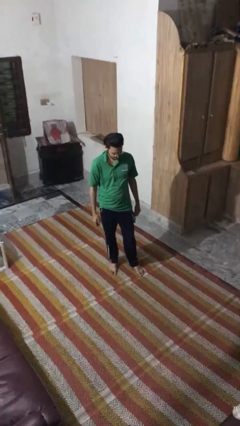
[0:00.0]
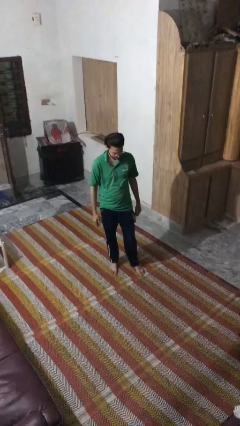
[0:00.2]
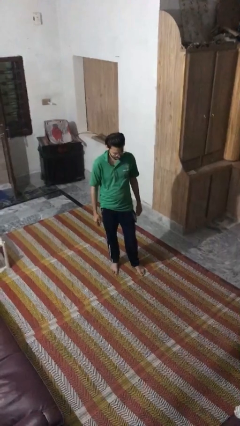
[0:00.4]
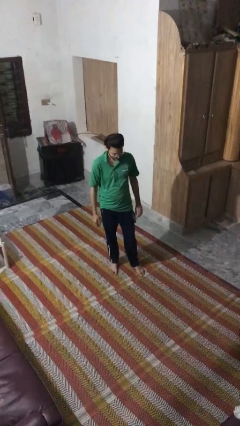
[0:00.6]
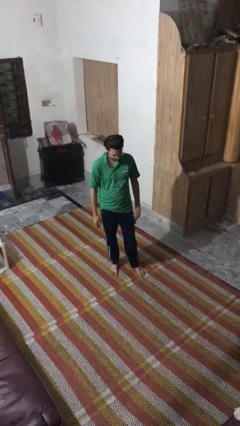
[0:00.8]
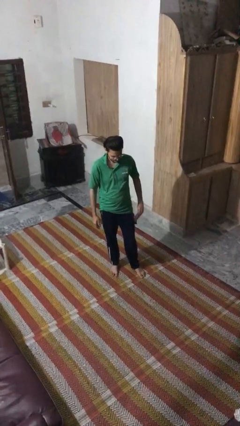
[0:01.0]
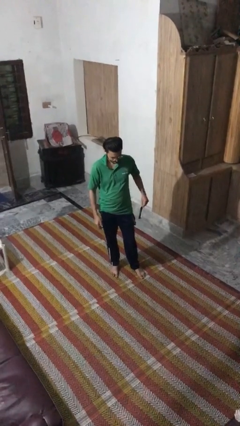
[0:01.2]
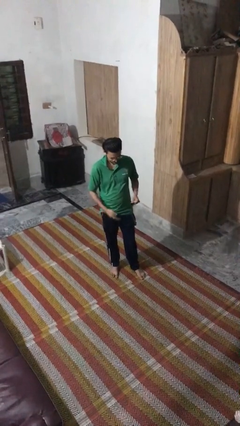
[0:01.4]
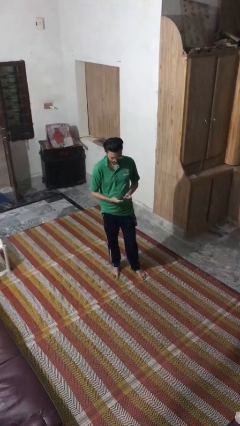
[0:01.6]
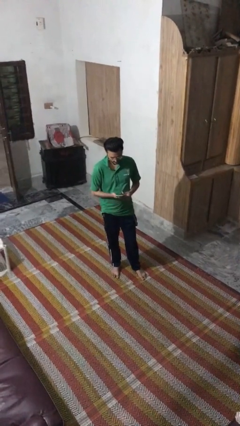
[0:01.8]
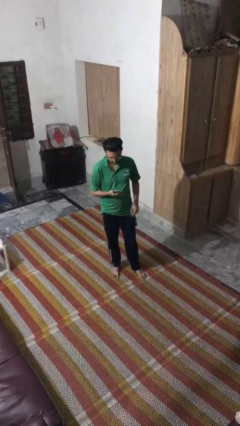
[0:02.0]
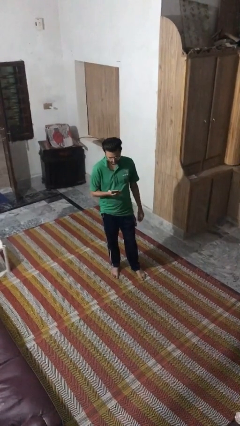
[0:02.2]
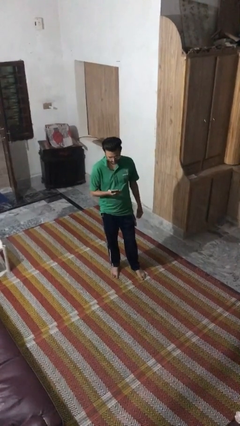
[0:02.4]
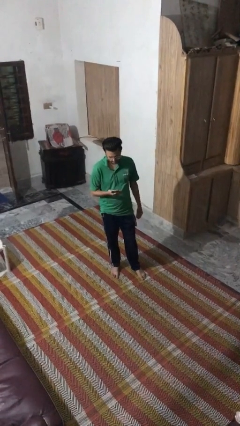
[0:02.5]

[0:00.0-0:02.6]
person takes phone from pocket

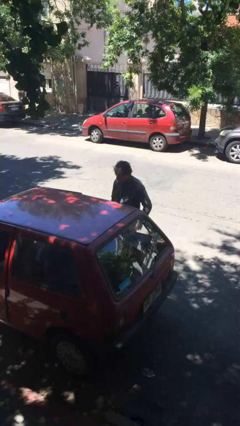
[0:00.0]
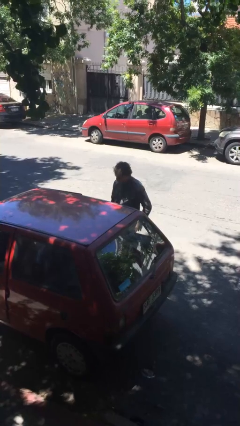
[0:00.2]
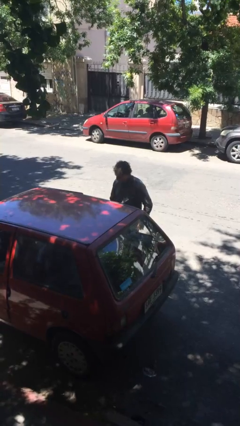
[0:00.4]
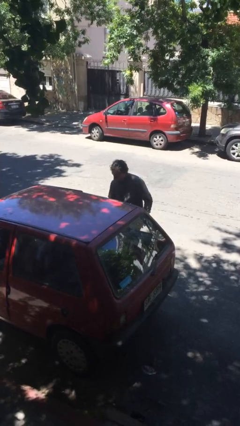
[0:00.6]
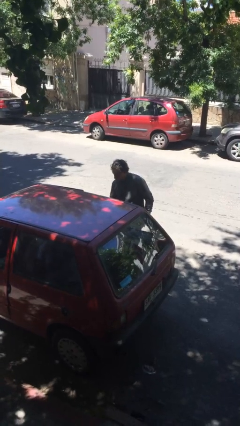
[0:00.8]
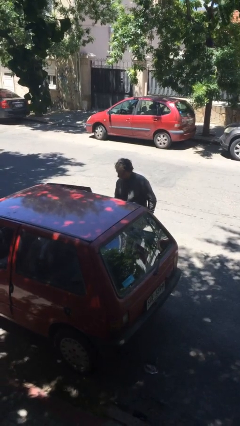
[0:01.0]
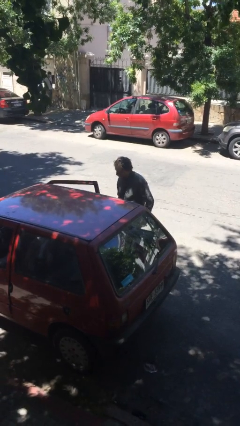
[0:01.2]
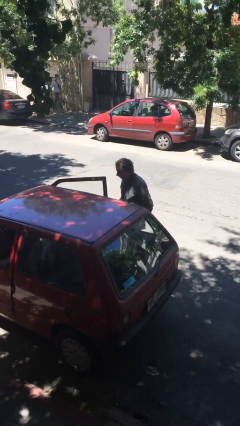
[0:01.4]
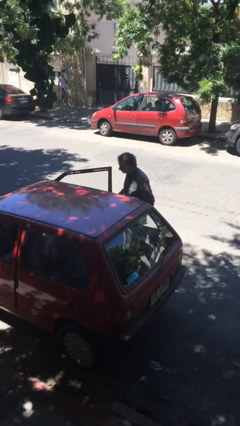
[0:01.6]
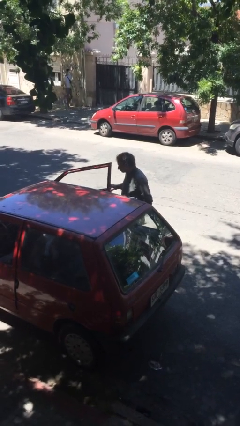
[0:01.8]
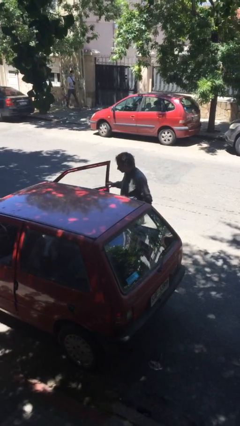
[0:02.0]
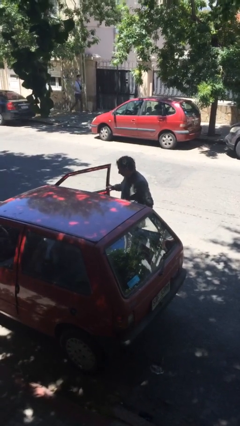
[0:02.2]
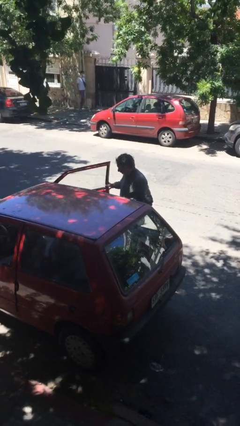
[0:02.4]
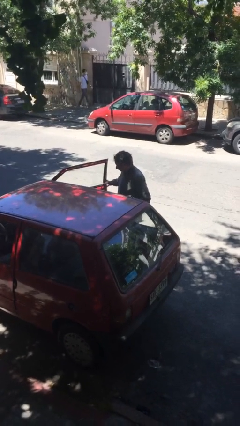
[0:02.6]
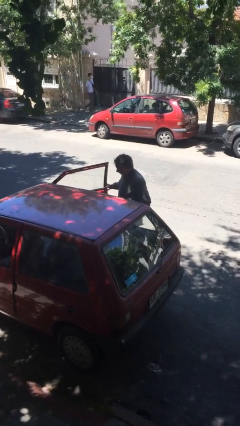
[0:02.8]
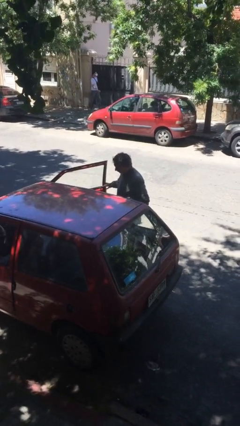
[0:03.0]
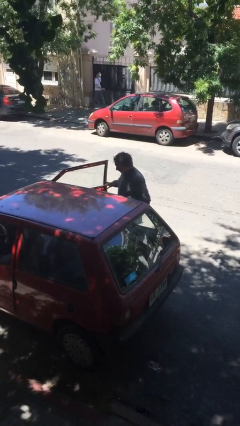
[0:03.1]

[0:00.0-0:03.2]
person opens car door

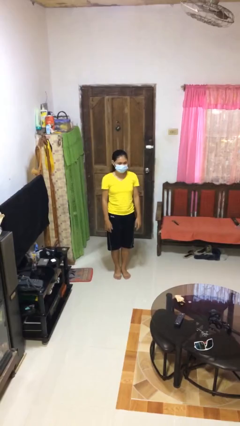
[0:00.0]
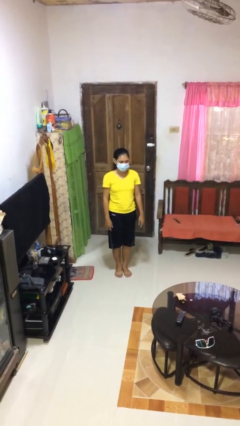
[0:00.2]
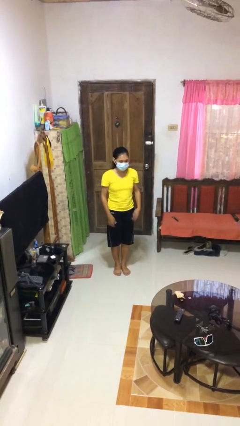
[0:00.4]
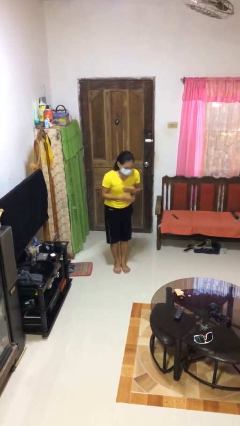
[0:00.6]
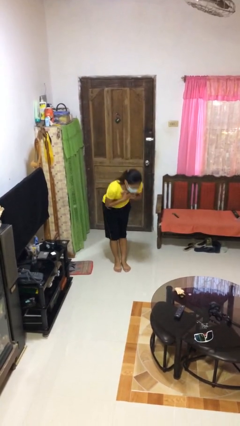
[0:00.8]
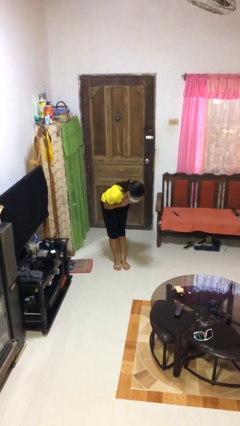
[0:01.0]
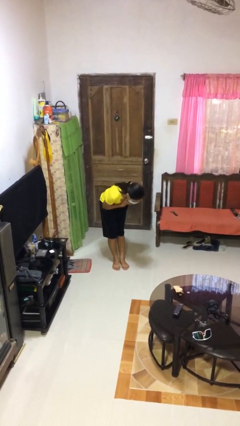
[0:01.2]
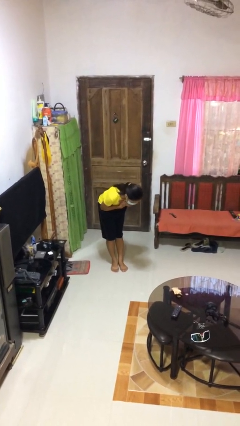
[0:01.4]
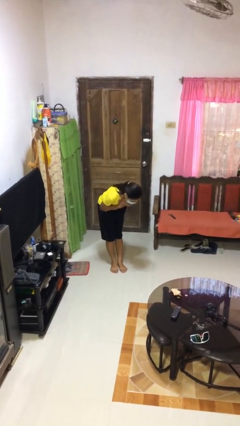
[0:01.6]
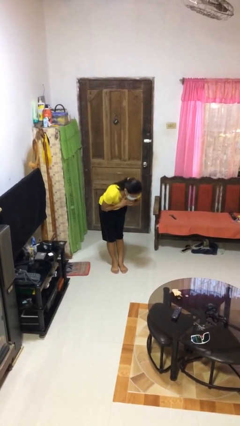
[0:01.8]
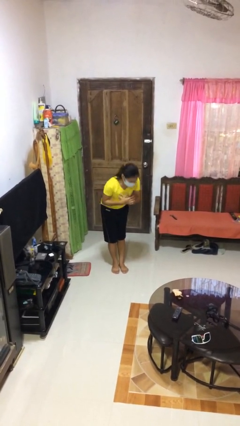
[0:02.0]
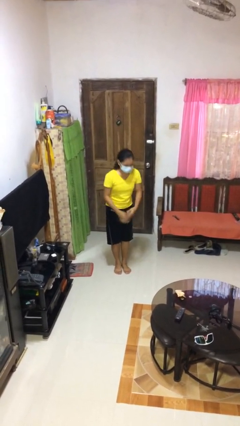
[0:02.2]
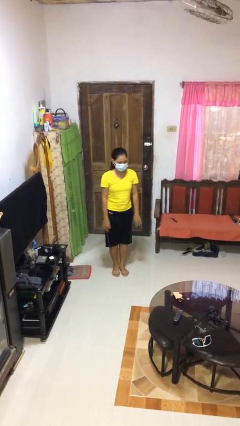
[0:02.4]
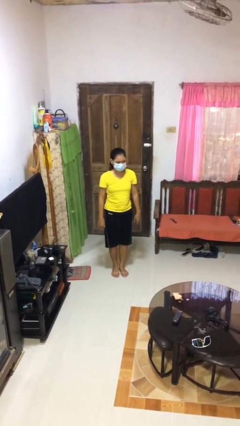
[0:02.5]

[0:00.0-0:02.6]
person bows

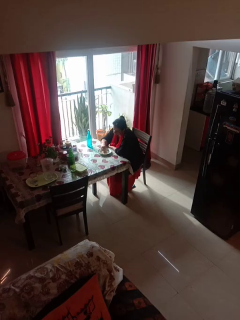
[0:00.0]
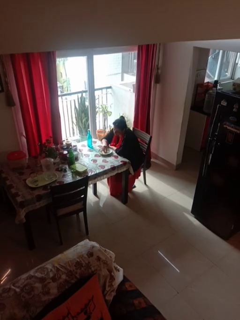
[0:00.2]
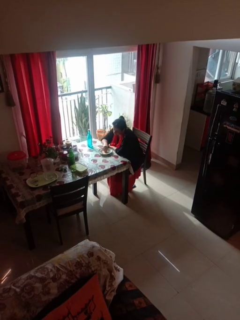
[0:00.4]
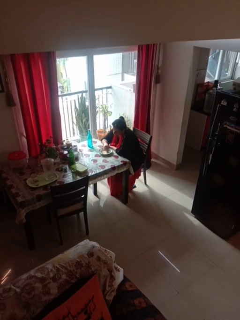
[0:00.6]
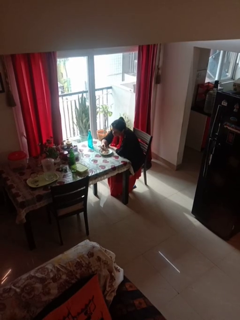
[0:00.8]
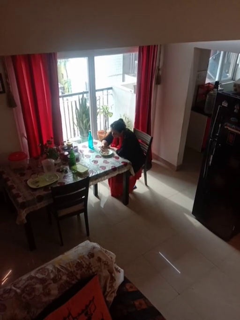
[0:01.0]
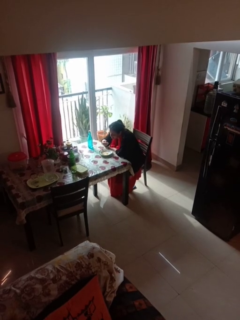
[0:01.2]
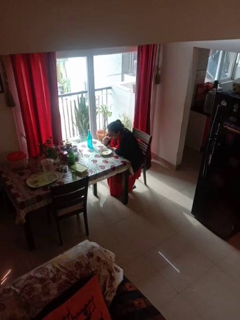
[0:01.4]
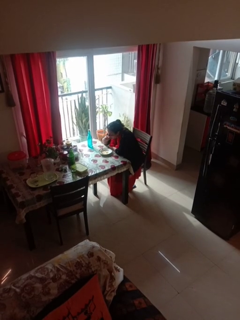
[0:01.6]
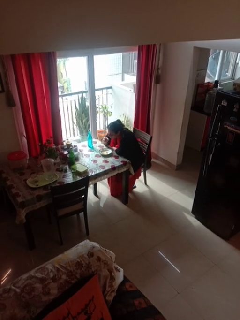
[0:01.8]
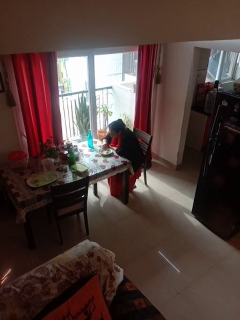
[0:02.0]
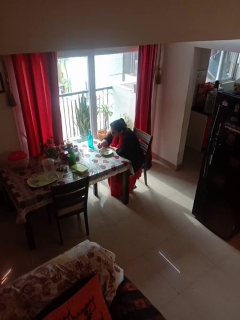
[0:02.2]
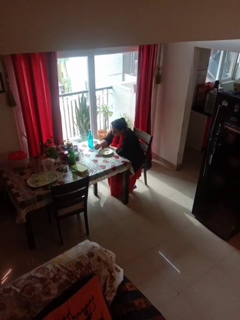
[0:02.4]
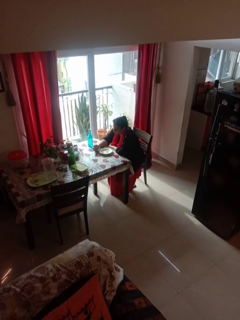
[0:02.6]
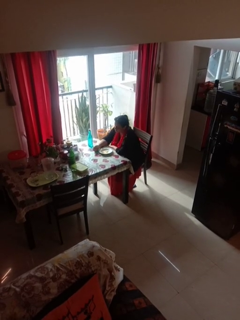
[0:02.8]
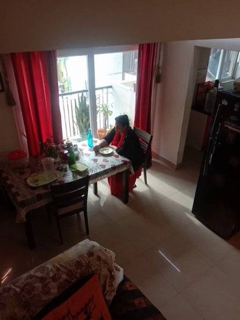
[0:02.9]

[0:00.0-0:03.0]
person eats with hands

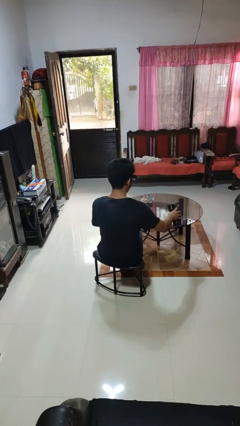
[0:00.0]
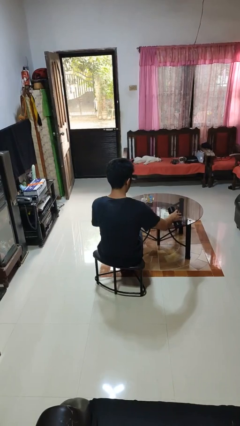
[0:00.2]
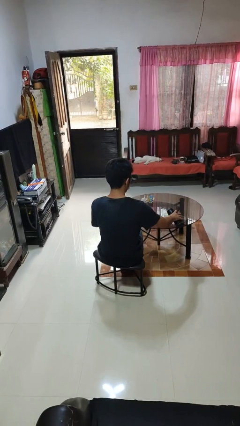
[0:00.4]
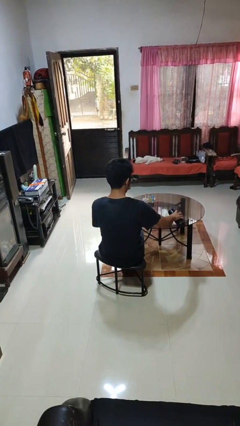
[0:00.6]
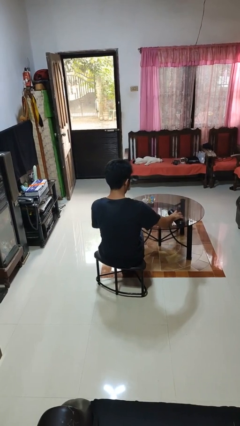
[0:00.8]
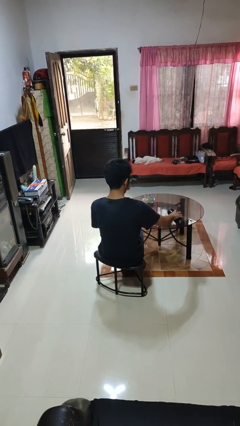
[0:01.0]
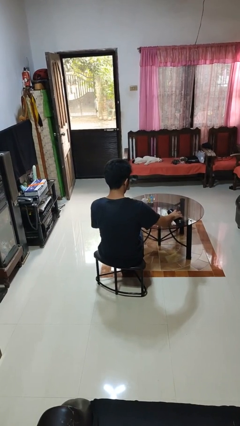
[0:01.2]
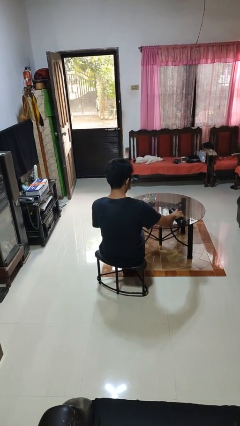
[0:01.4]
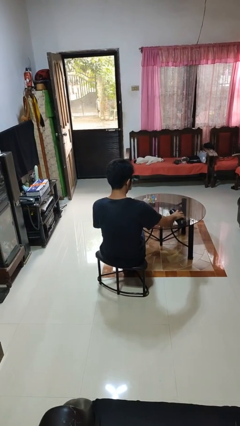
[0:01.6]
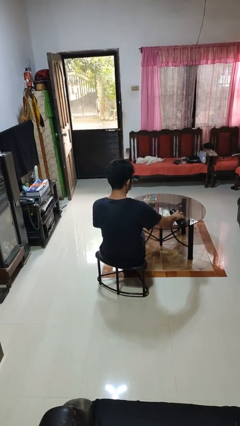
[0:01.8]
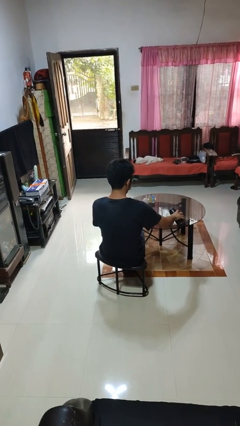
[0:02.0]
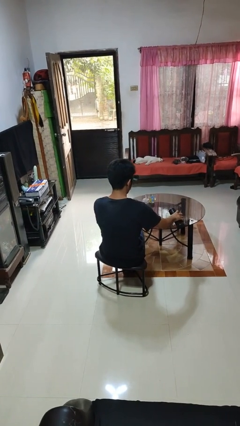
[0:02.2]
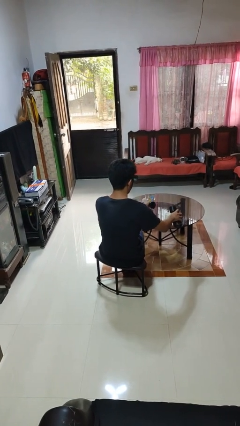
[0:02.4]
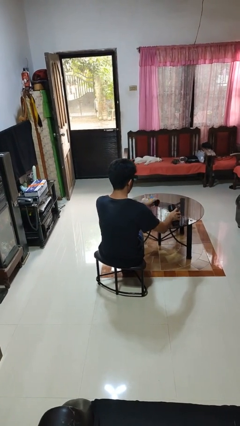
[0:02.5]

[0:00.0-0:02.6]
person pours liquid into cup

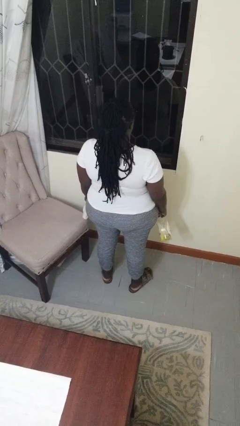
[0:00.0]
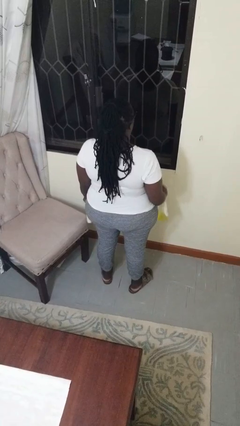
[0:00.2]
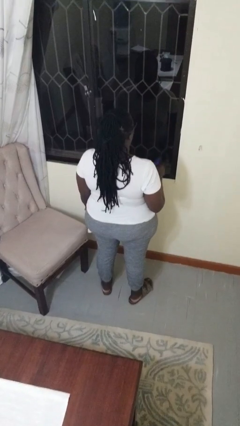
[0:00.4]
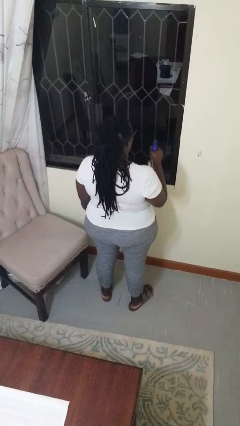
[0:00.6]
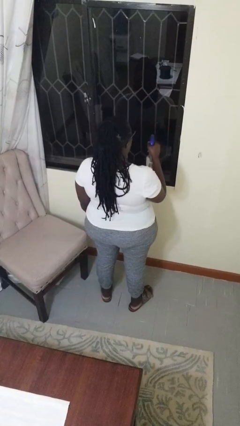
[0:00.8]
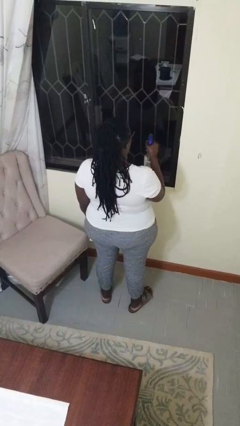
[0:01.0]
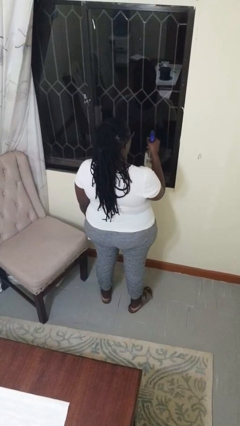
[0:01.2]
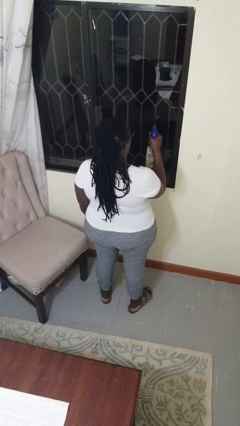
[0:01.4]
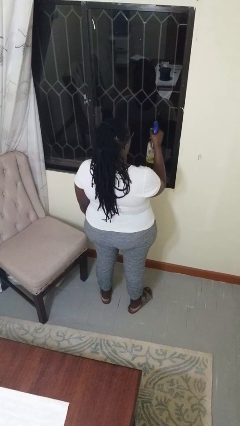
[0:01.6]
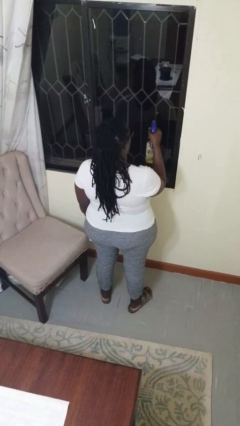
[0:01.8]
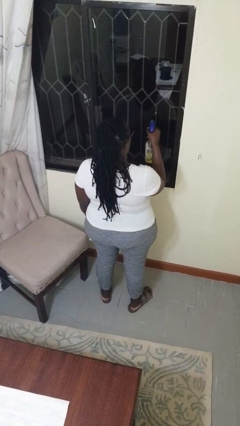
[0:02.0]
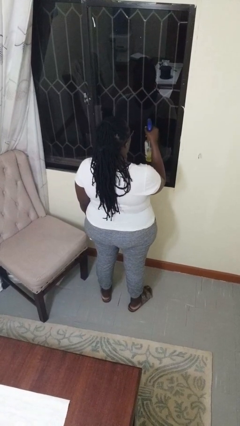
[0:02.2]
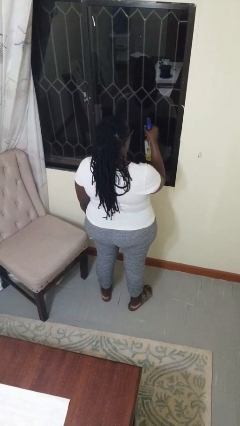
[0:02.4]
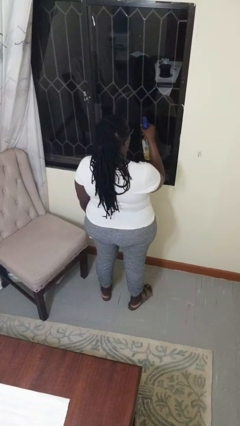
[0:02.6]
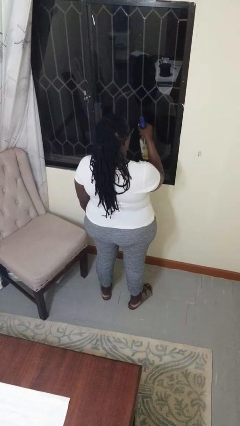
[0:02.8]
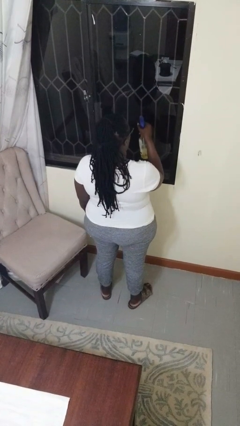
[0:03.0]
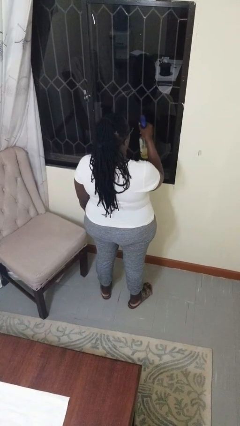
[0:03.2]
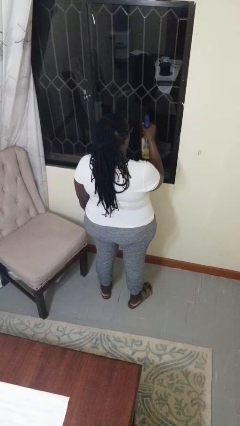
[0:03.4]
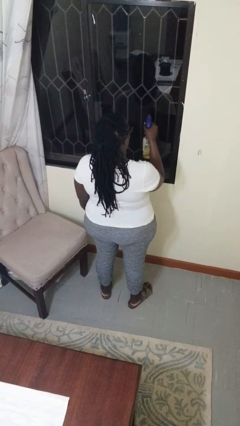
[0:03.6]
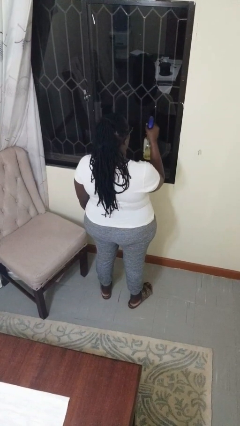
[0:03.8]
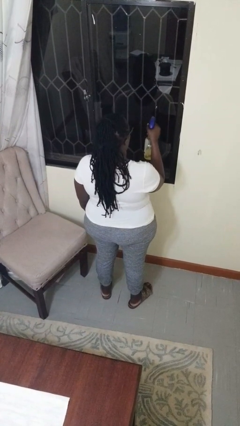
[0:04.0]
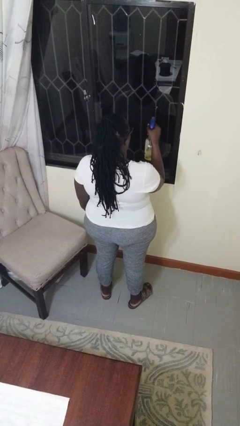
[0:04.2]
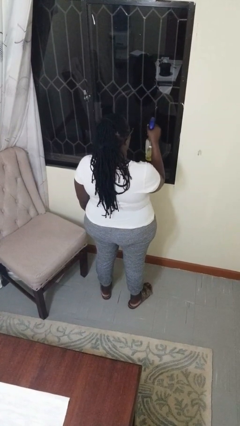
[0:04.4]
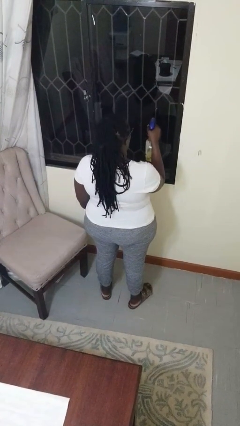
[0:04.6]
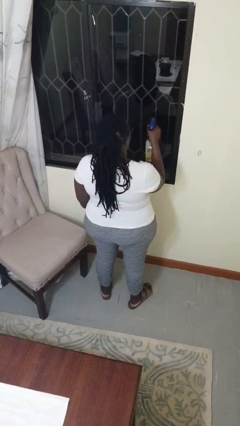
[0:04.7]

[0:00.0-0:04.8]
person sprays from bottle
